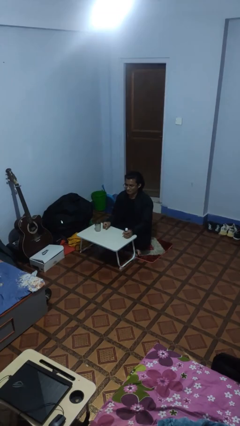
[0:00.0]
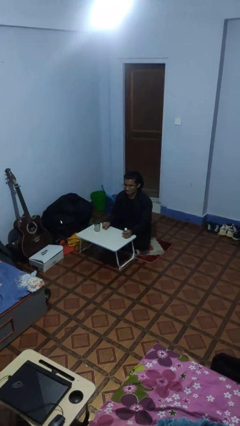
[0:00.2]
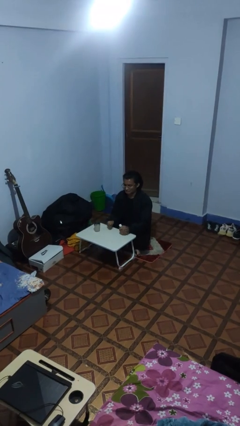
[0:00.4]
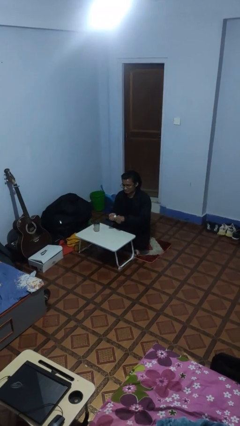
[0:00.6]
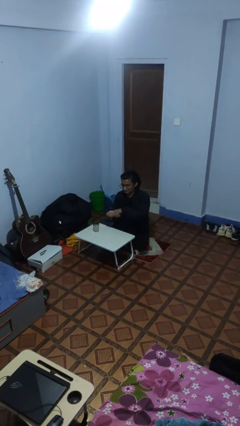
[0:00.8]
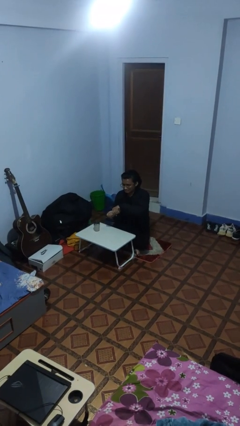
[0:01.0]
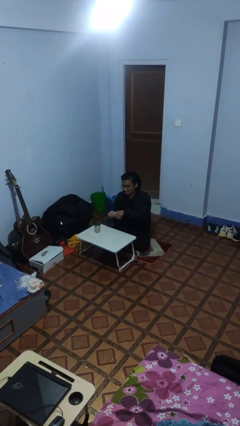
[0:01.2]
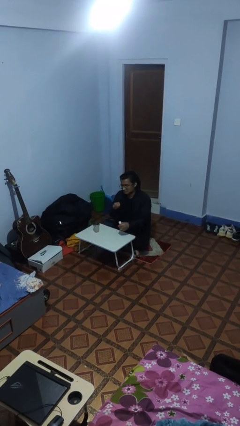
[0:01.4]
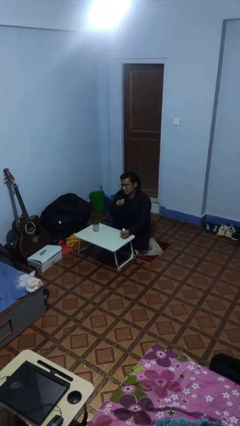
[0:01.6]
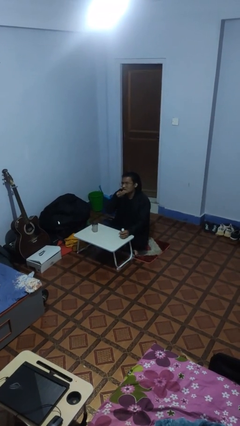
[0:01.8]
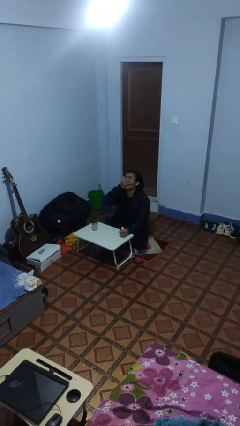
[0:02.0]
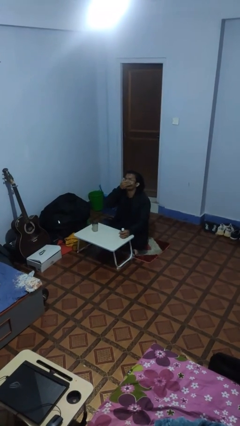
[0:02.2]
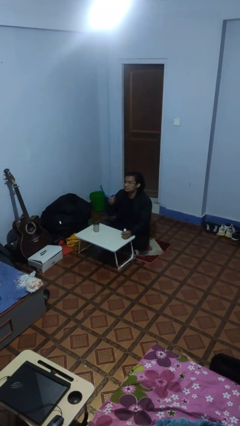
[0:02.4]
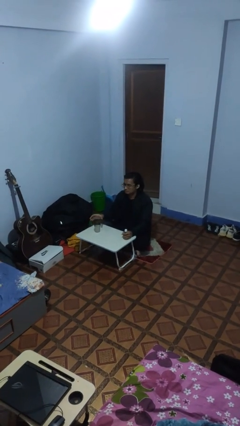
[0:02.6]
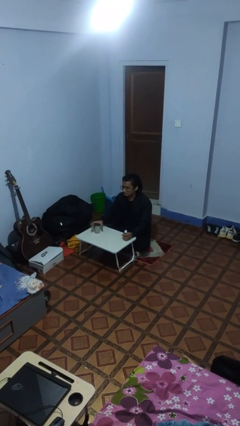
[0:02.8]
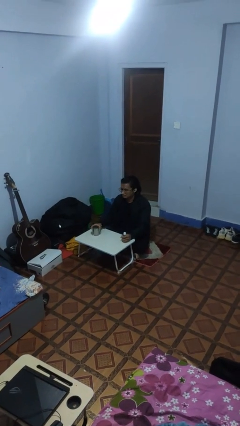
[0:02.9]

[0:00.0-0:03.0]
person takes medicine pills

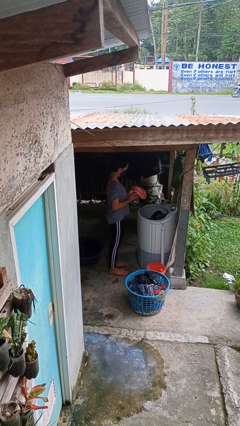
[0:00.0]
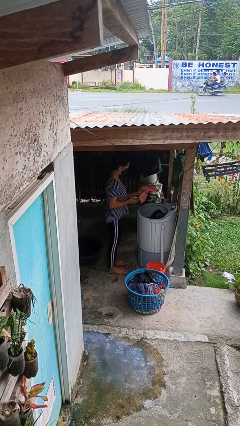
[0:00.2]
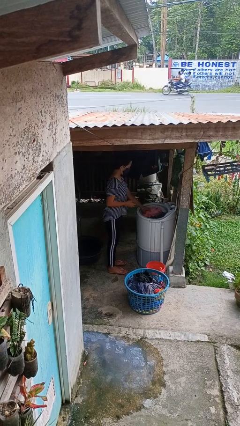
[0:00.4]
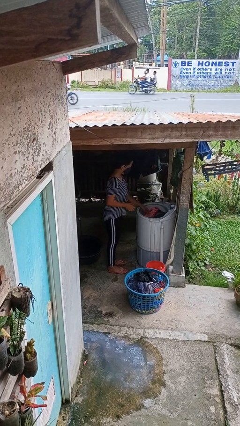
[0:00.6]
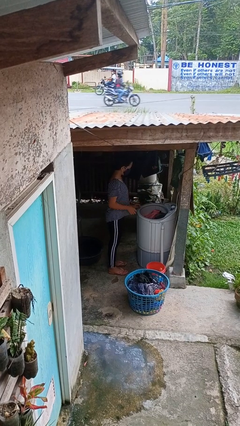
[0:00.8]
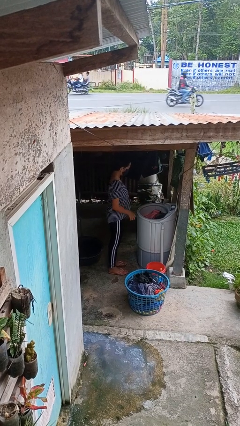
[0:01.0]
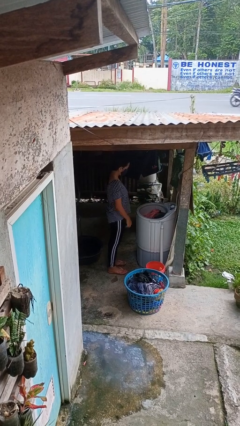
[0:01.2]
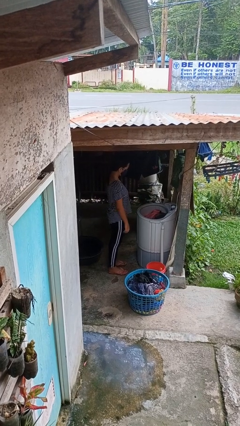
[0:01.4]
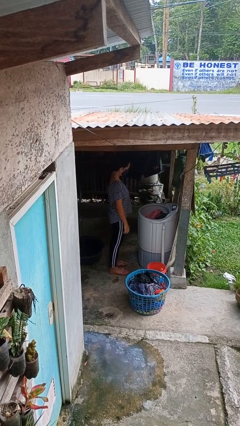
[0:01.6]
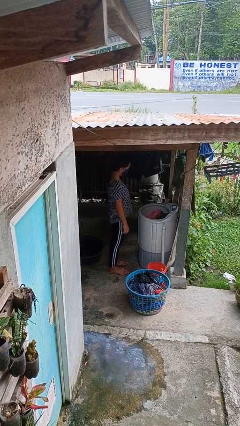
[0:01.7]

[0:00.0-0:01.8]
person loads clotheswasher

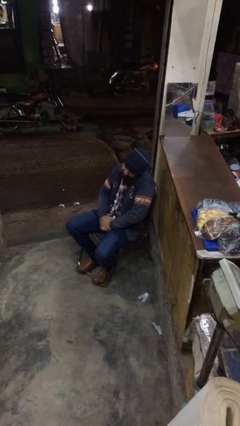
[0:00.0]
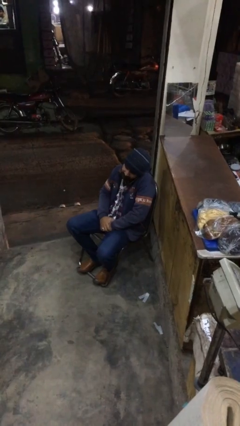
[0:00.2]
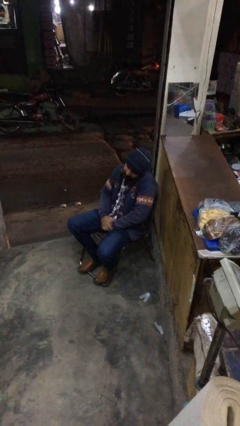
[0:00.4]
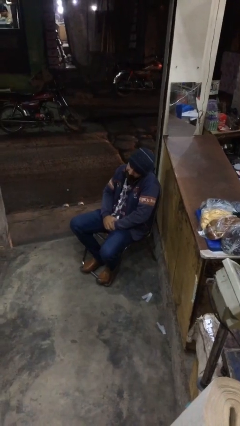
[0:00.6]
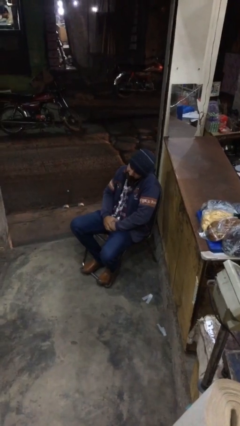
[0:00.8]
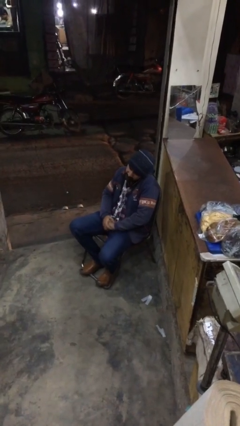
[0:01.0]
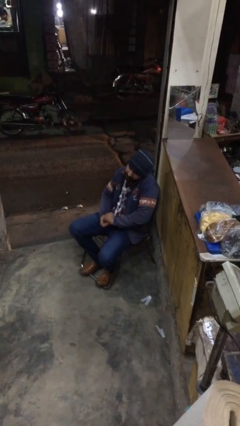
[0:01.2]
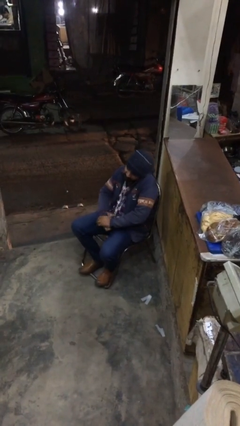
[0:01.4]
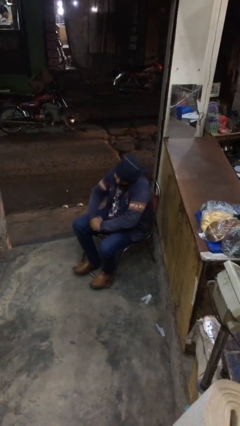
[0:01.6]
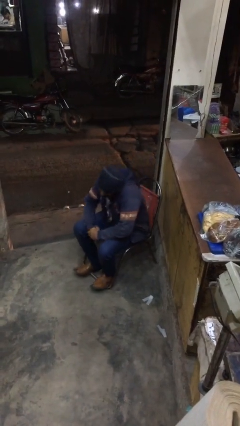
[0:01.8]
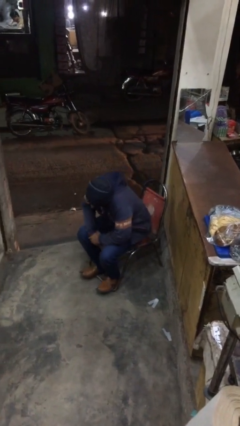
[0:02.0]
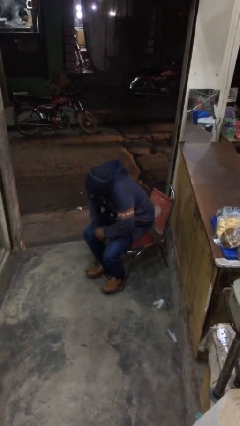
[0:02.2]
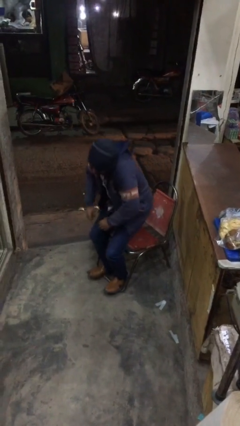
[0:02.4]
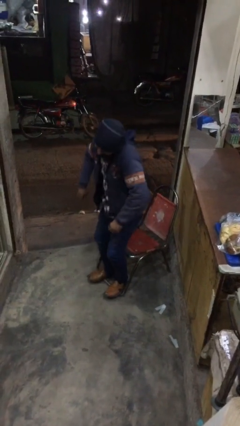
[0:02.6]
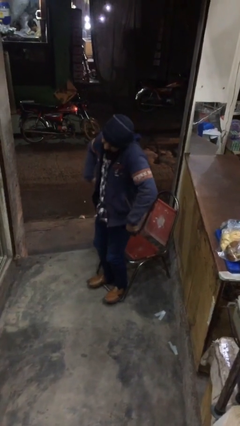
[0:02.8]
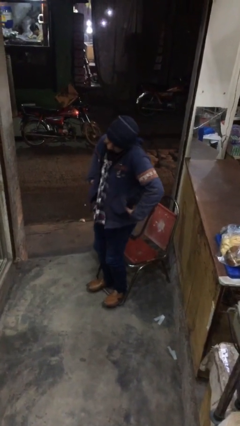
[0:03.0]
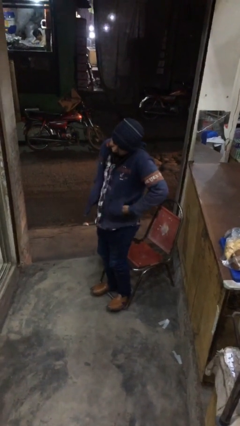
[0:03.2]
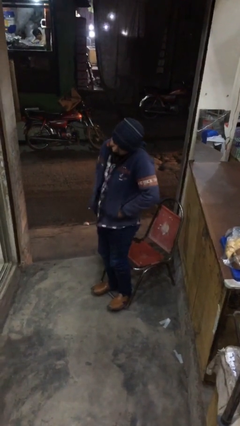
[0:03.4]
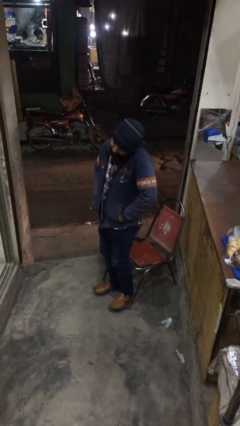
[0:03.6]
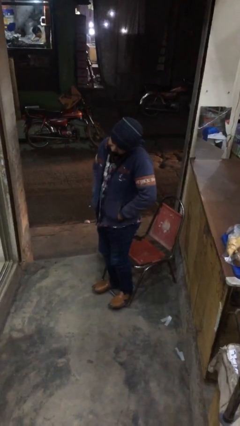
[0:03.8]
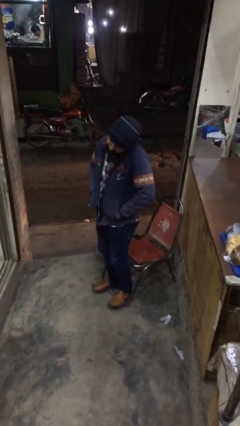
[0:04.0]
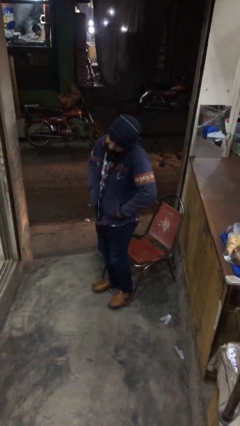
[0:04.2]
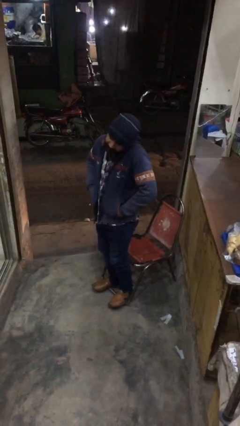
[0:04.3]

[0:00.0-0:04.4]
person stands up

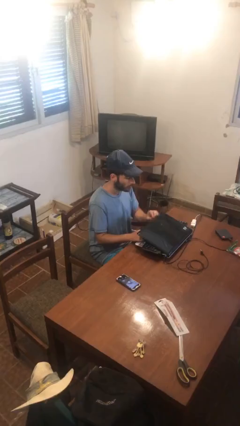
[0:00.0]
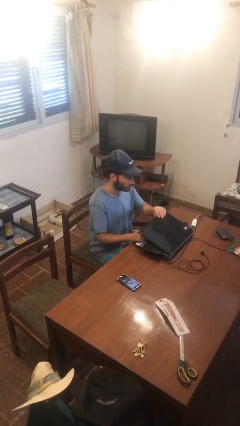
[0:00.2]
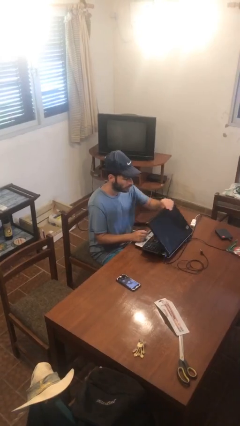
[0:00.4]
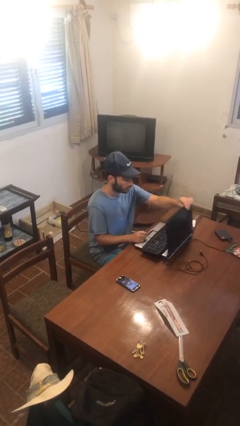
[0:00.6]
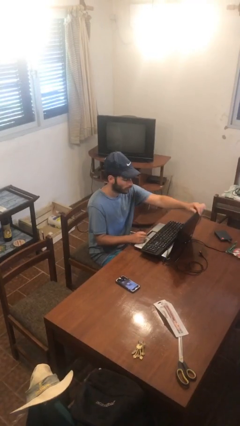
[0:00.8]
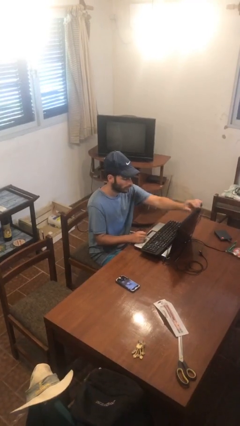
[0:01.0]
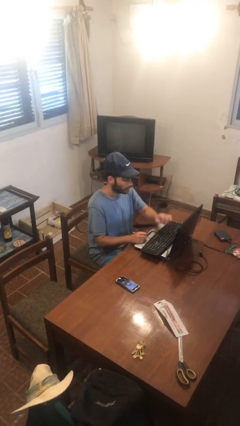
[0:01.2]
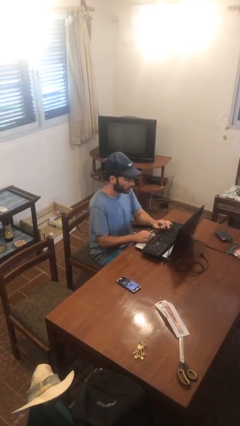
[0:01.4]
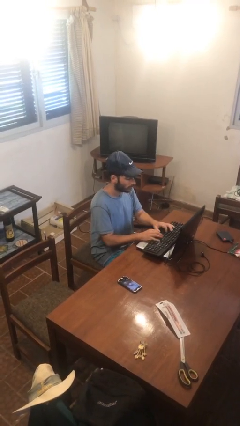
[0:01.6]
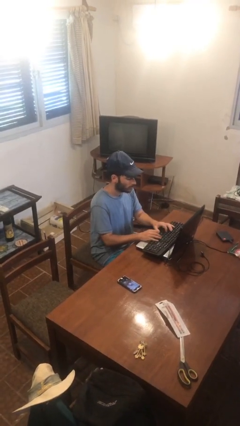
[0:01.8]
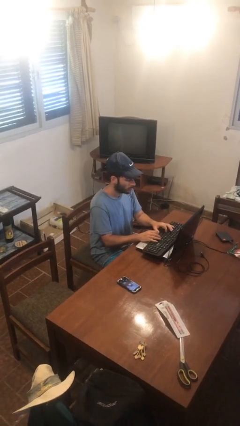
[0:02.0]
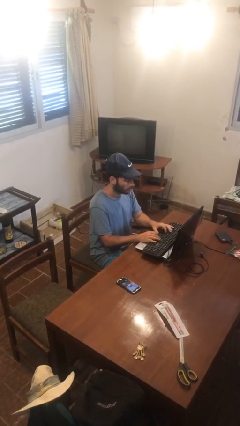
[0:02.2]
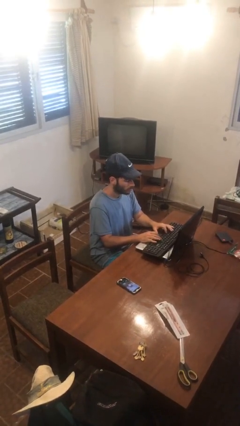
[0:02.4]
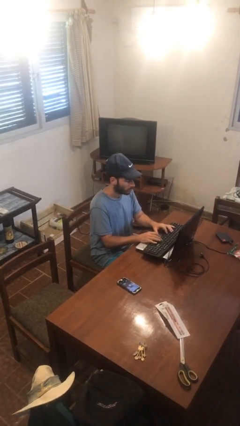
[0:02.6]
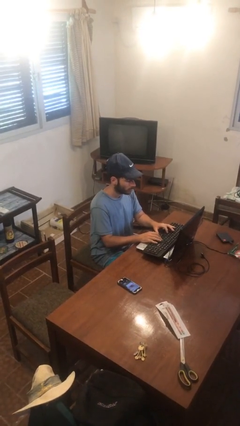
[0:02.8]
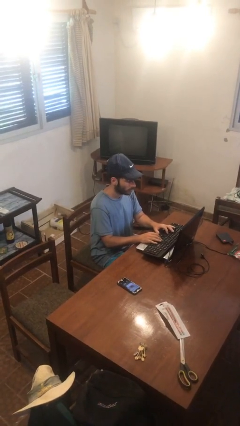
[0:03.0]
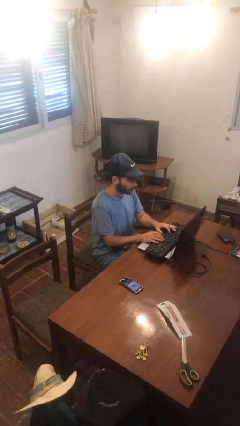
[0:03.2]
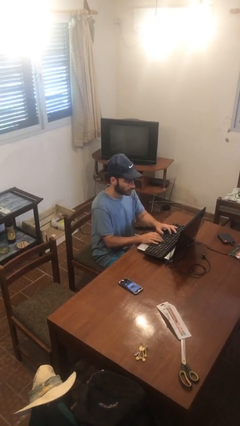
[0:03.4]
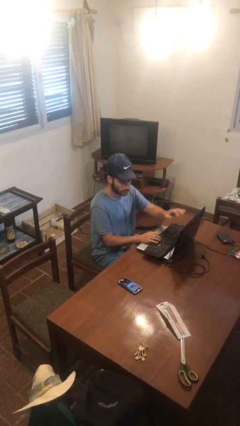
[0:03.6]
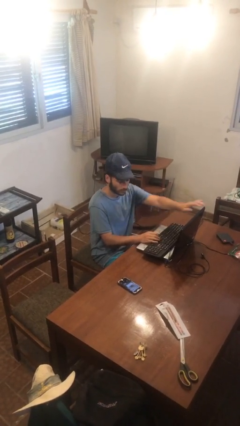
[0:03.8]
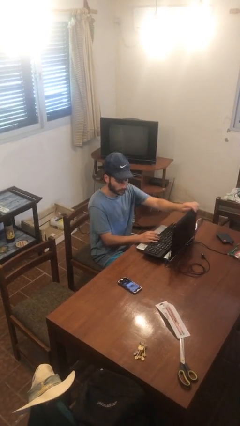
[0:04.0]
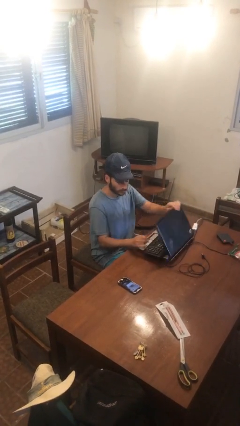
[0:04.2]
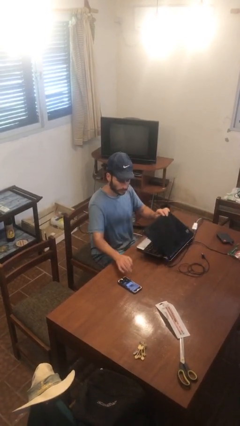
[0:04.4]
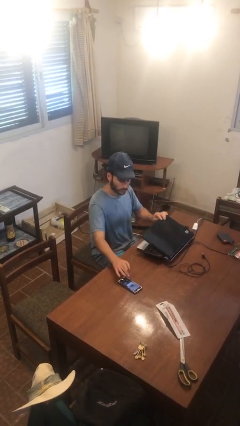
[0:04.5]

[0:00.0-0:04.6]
person interacts with laptop

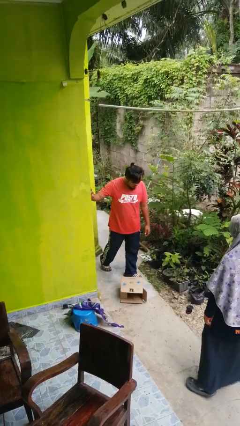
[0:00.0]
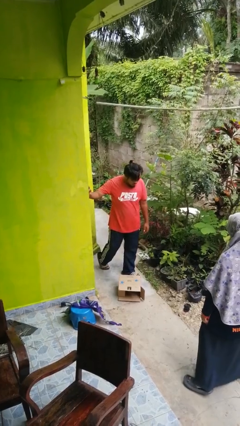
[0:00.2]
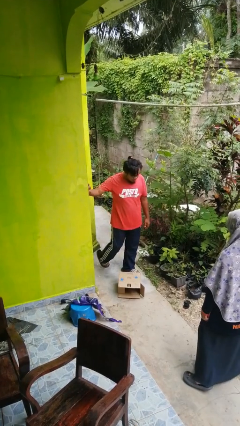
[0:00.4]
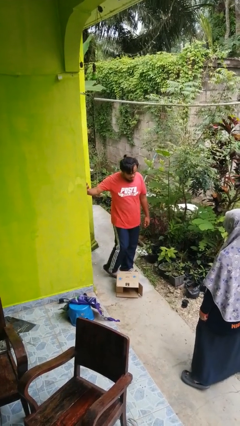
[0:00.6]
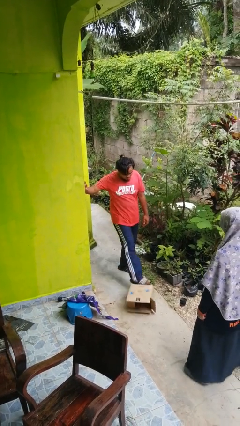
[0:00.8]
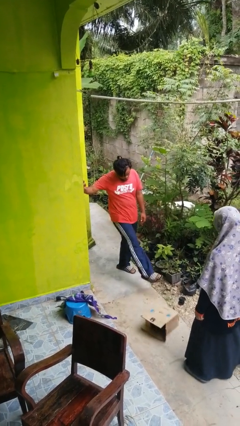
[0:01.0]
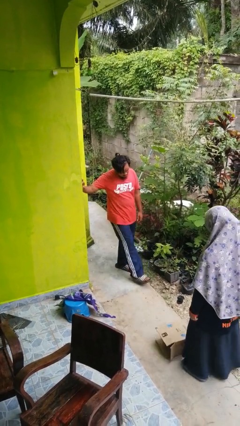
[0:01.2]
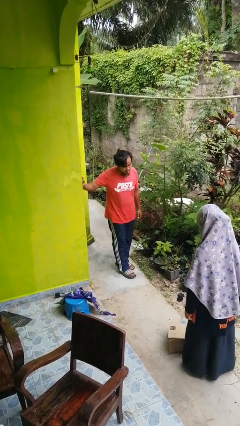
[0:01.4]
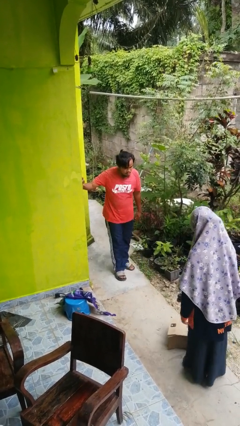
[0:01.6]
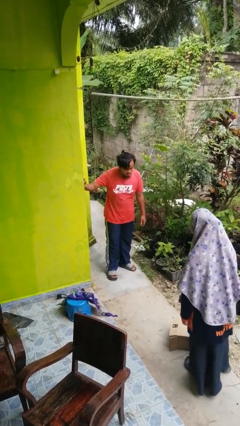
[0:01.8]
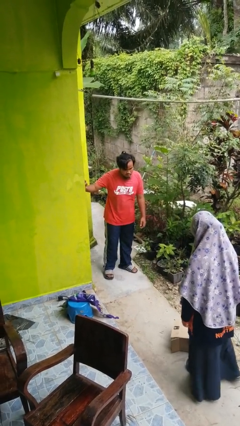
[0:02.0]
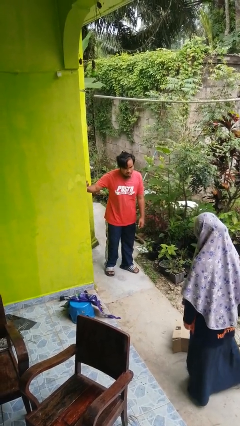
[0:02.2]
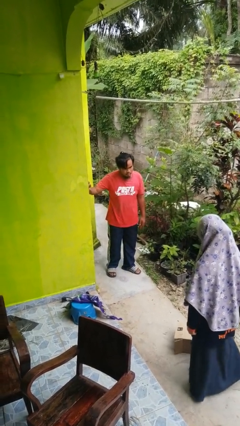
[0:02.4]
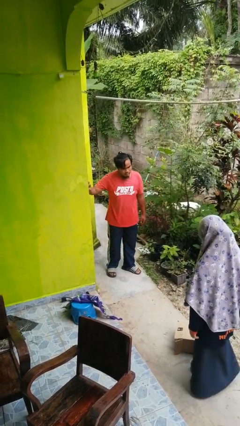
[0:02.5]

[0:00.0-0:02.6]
person kicks object to person

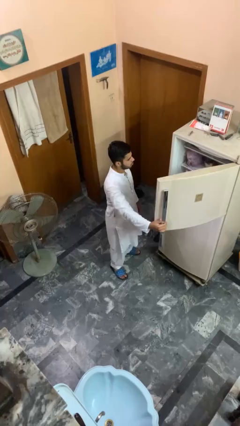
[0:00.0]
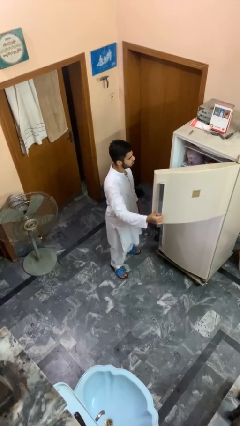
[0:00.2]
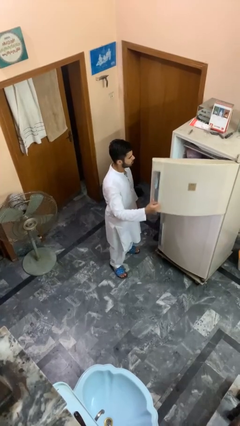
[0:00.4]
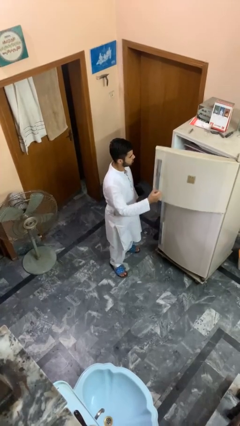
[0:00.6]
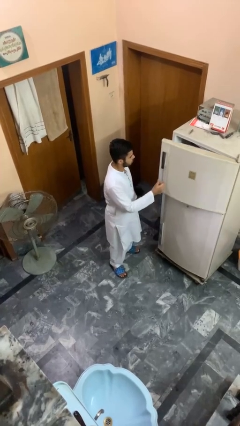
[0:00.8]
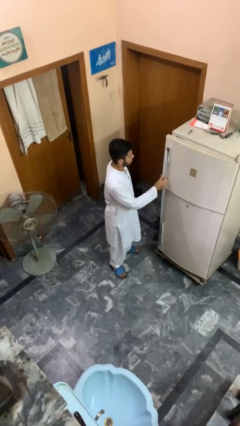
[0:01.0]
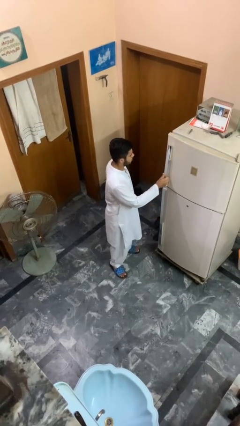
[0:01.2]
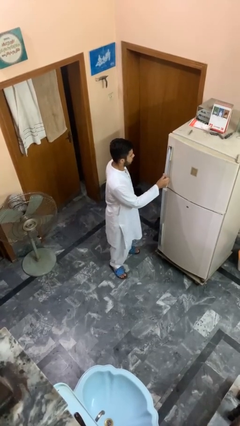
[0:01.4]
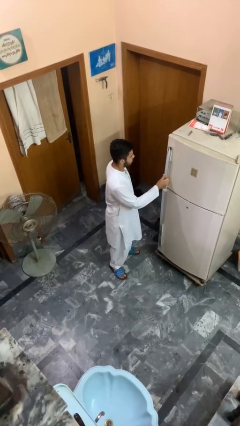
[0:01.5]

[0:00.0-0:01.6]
person closes refrigerator
